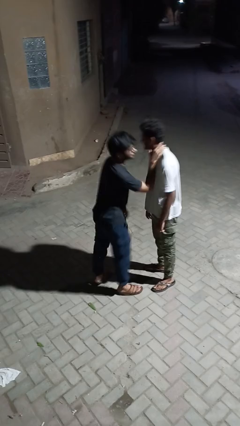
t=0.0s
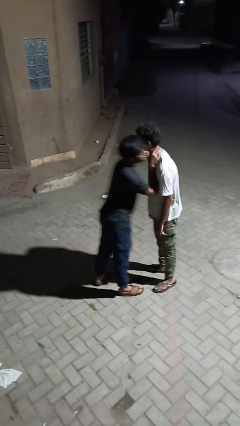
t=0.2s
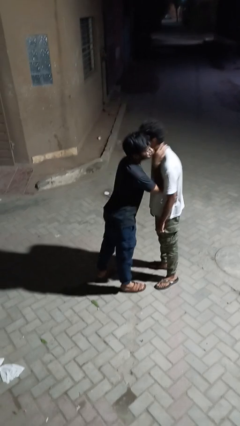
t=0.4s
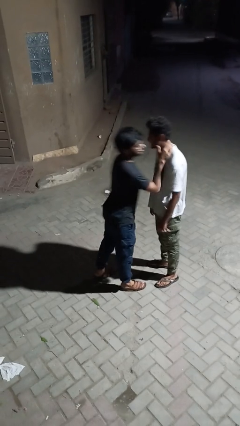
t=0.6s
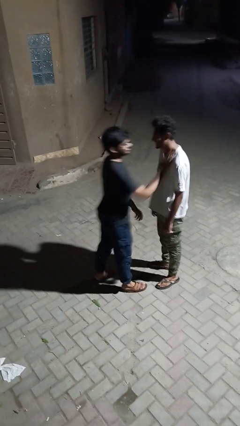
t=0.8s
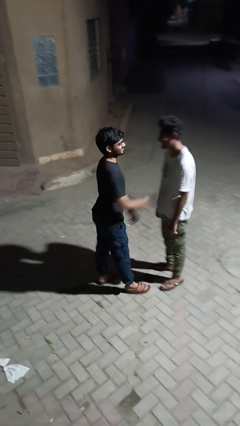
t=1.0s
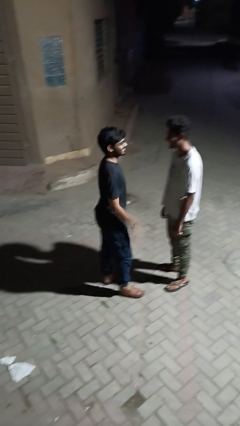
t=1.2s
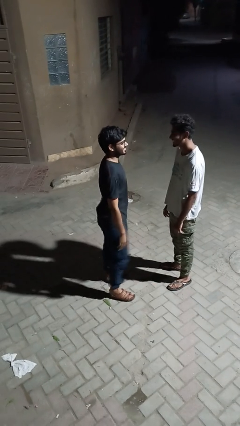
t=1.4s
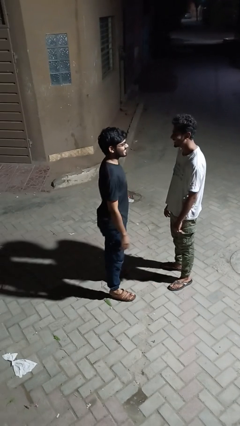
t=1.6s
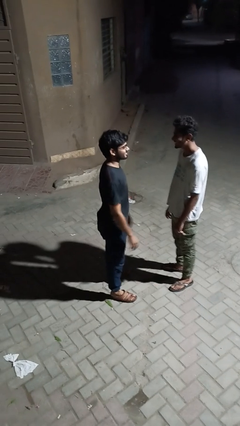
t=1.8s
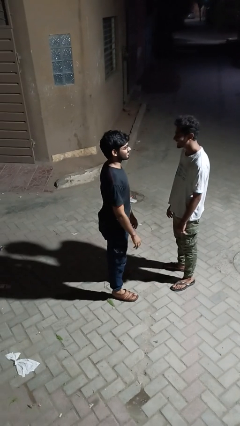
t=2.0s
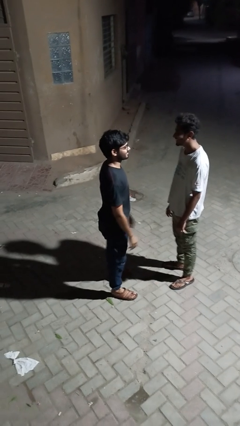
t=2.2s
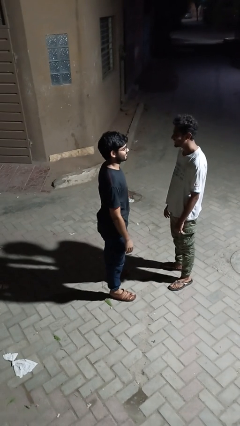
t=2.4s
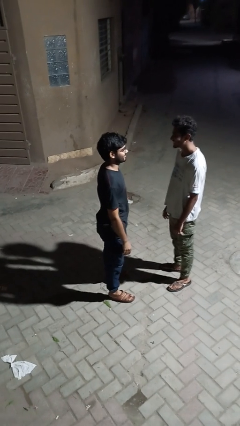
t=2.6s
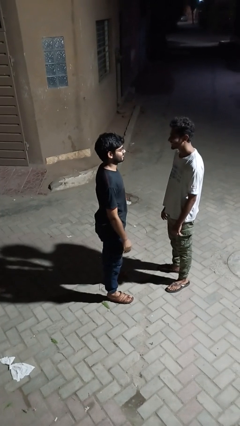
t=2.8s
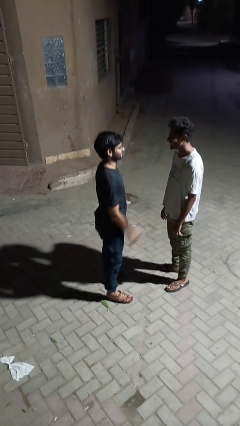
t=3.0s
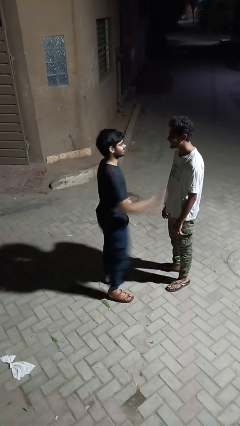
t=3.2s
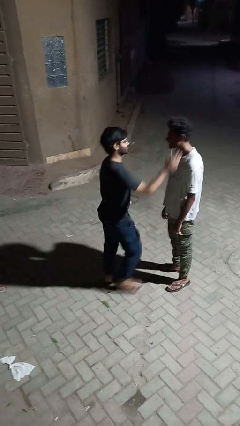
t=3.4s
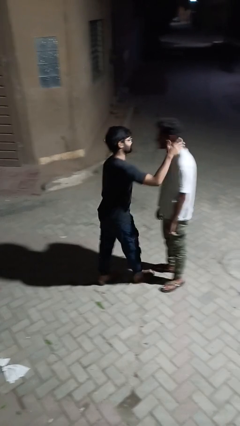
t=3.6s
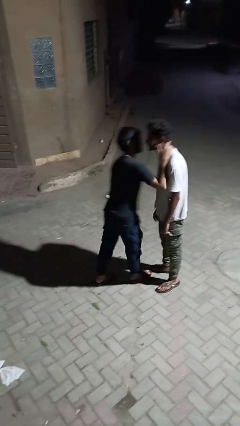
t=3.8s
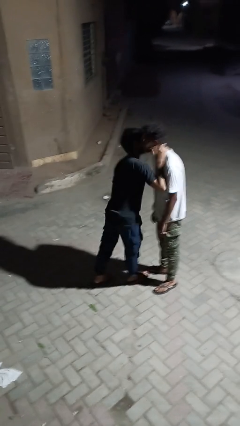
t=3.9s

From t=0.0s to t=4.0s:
person polishes car with rag

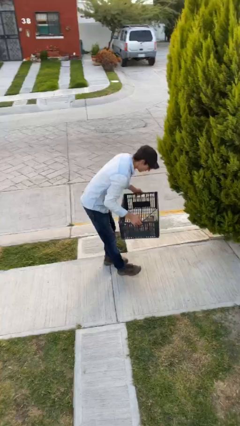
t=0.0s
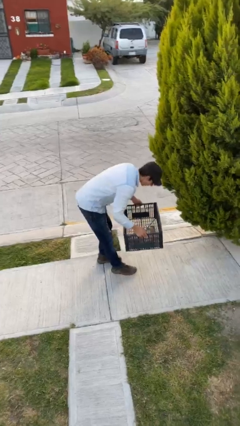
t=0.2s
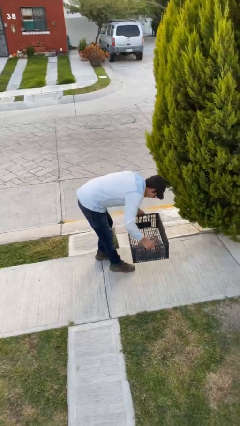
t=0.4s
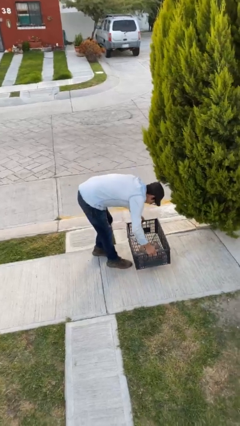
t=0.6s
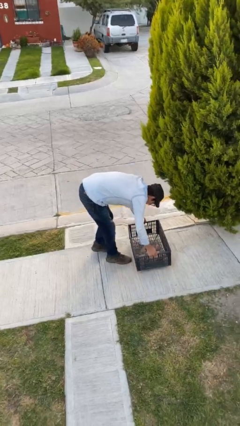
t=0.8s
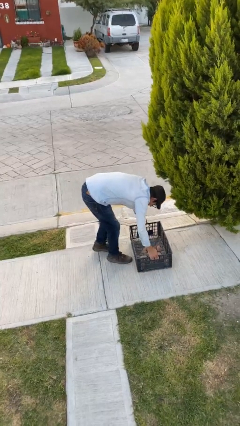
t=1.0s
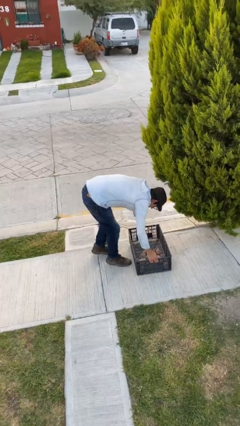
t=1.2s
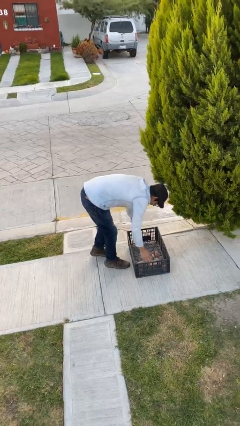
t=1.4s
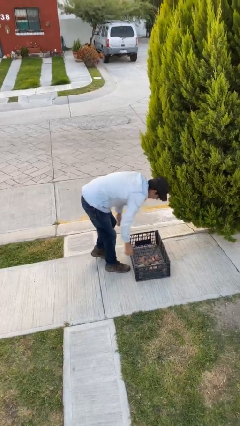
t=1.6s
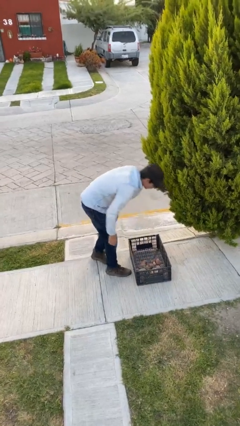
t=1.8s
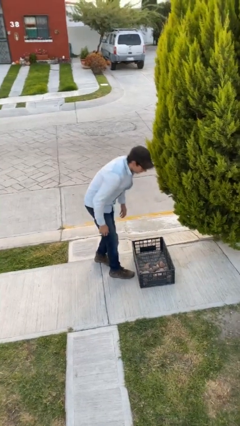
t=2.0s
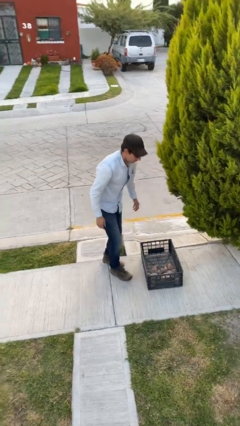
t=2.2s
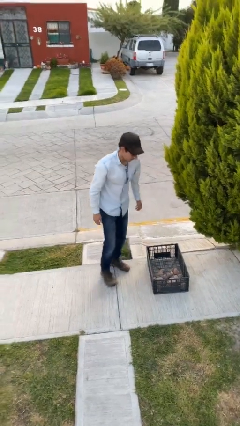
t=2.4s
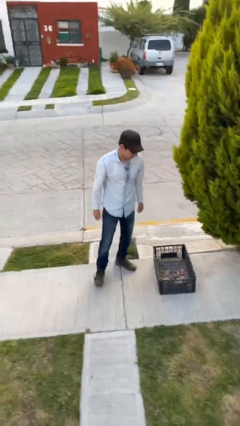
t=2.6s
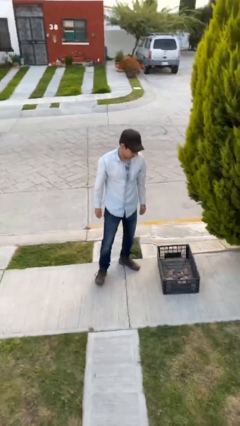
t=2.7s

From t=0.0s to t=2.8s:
person puts down object on floor

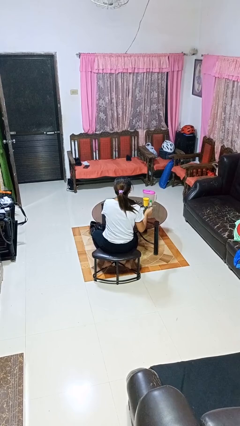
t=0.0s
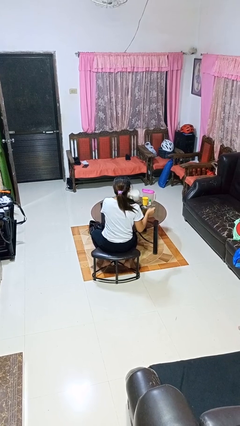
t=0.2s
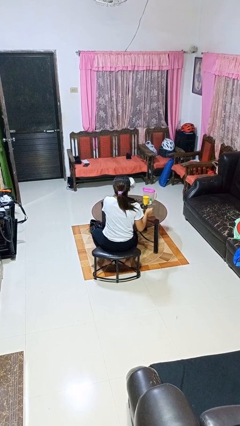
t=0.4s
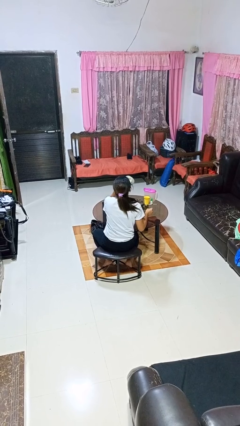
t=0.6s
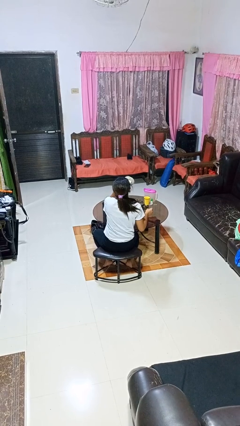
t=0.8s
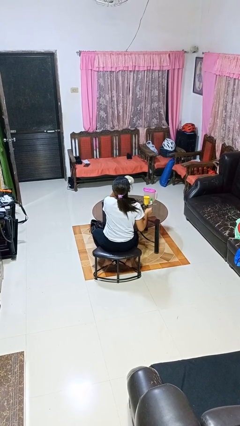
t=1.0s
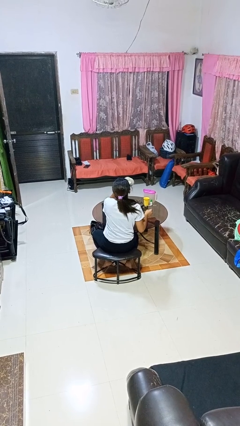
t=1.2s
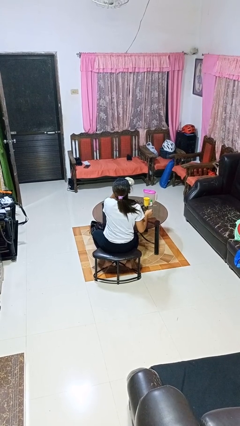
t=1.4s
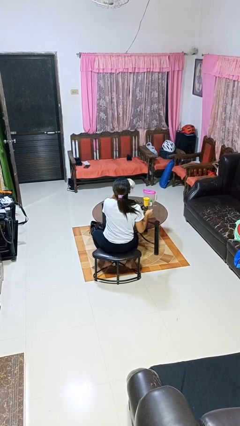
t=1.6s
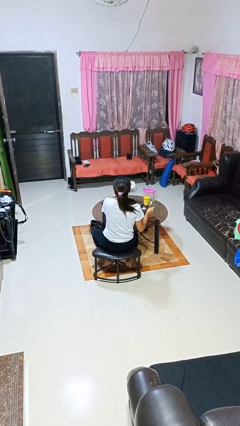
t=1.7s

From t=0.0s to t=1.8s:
person drinks from mug

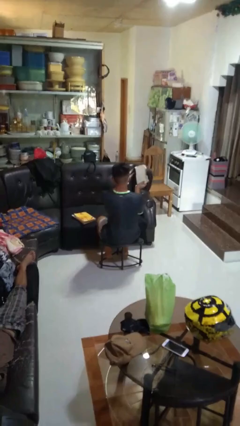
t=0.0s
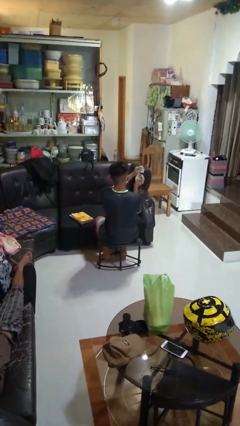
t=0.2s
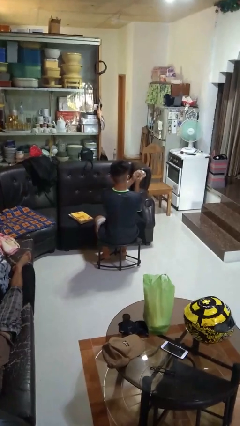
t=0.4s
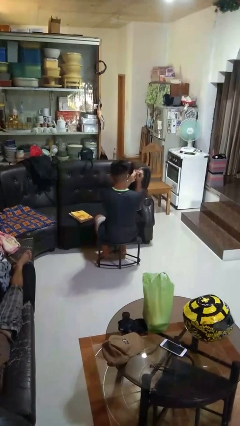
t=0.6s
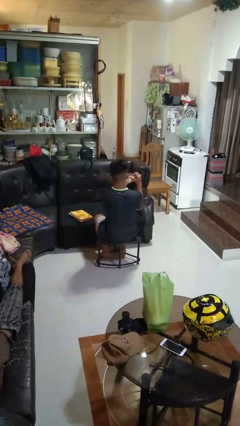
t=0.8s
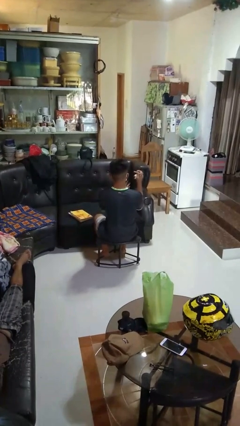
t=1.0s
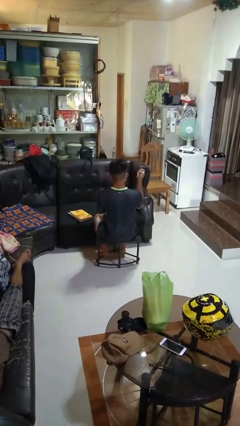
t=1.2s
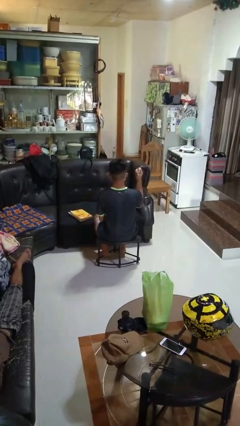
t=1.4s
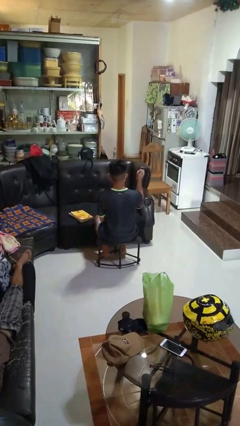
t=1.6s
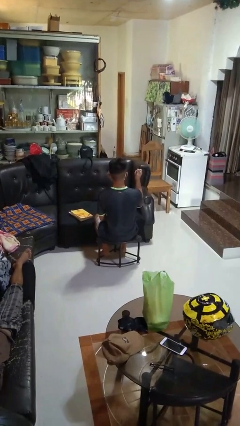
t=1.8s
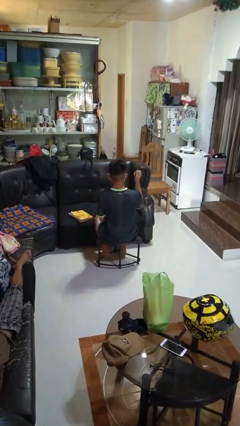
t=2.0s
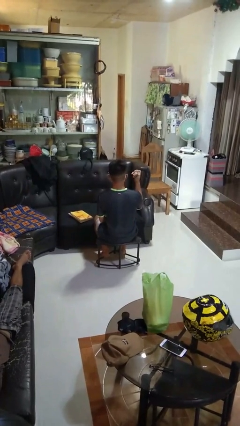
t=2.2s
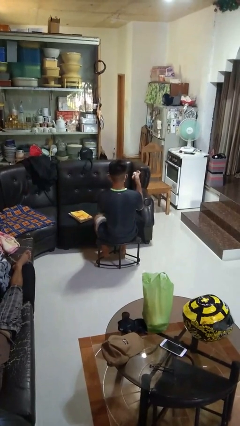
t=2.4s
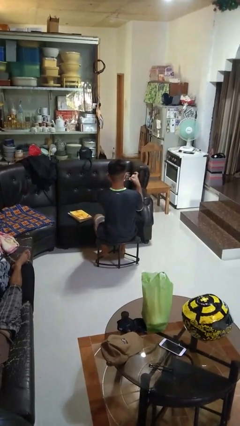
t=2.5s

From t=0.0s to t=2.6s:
person crumples paper

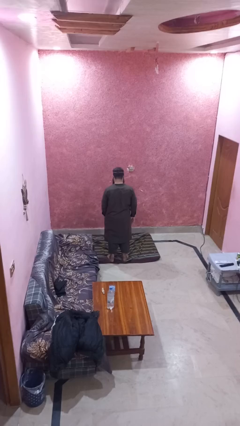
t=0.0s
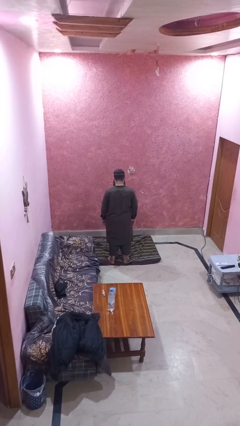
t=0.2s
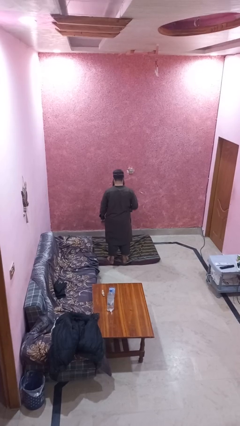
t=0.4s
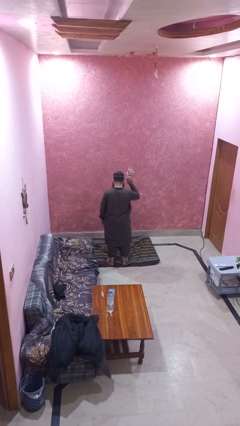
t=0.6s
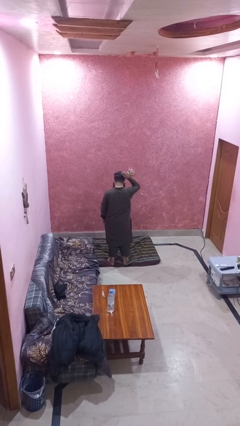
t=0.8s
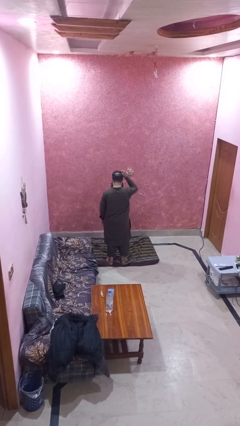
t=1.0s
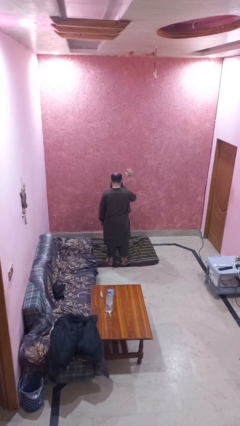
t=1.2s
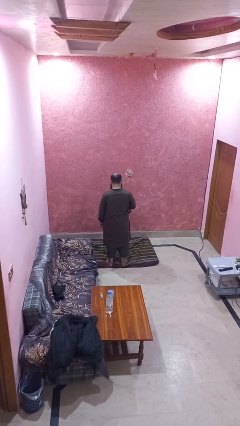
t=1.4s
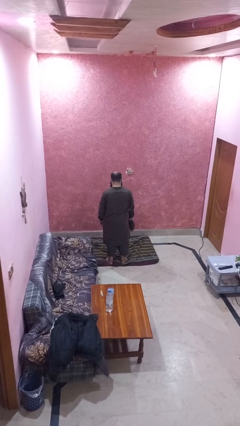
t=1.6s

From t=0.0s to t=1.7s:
person takes off hat

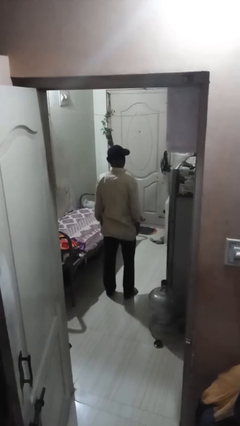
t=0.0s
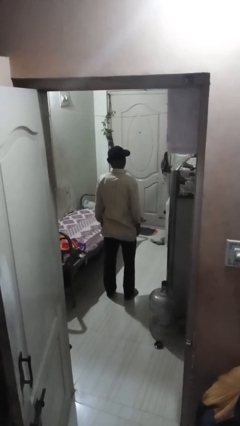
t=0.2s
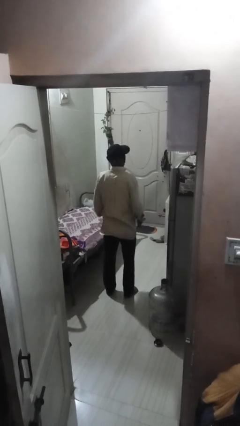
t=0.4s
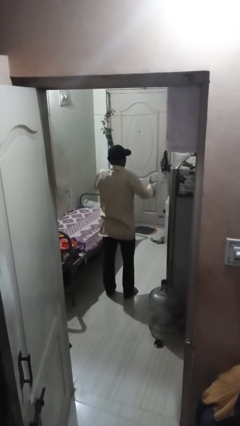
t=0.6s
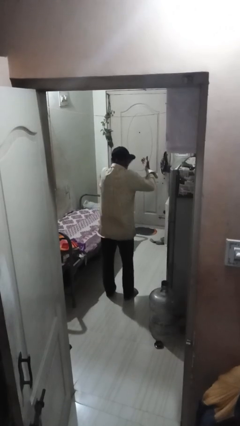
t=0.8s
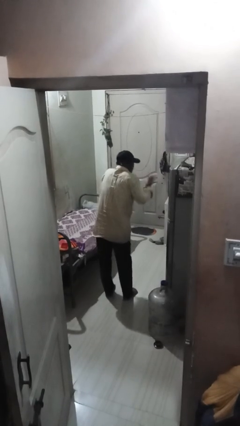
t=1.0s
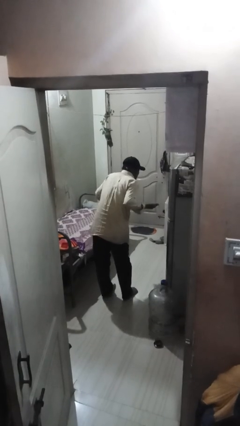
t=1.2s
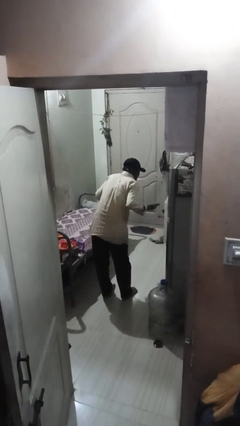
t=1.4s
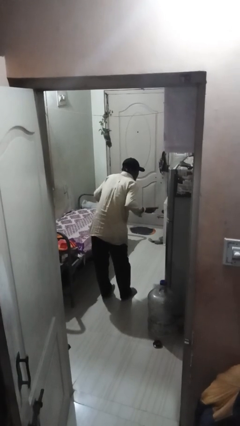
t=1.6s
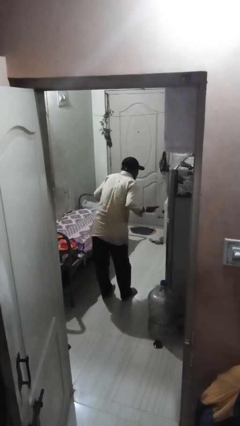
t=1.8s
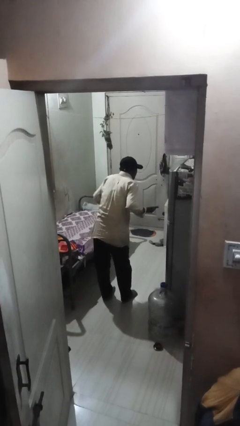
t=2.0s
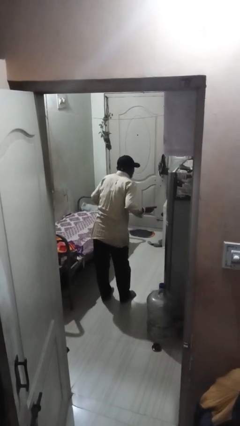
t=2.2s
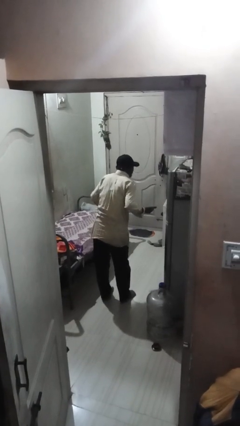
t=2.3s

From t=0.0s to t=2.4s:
person shrugs

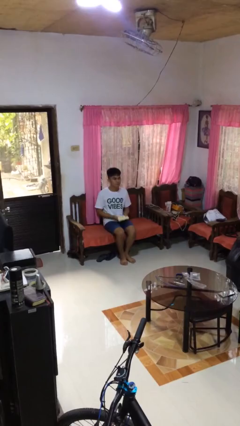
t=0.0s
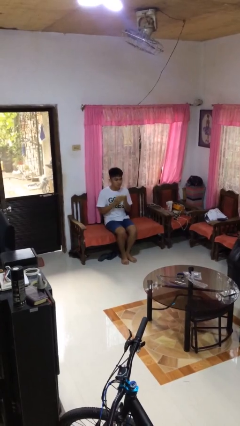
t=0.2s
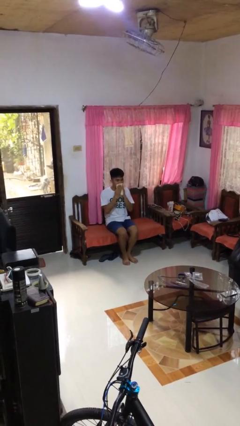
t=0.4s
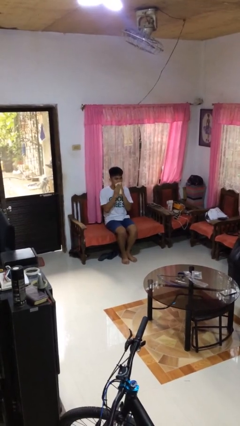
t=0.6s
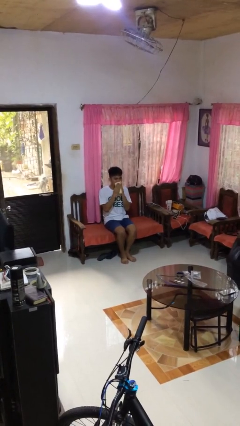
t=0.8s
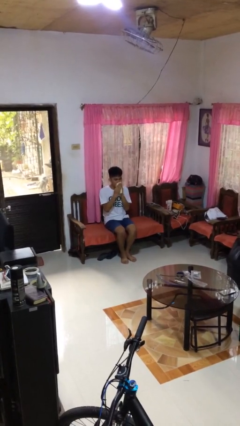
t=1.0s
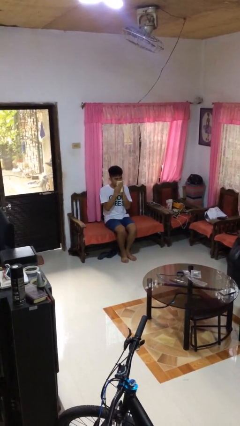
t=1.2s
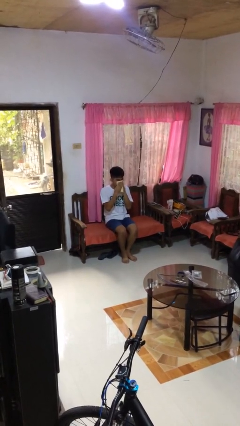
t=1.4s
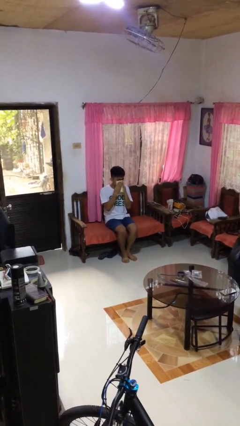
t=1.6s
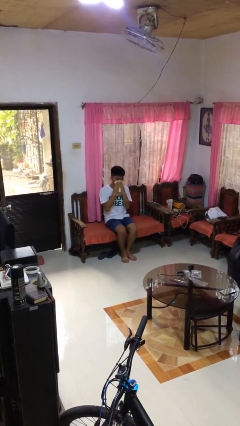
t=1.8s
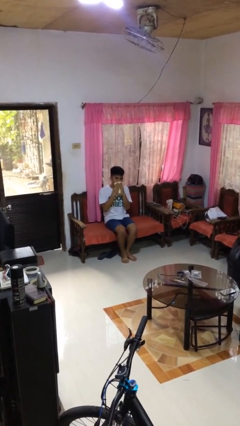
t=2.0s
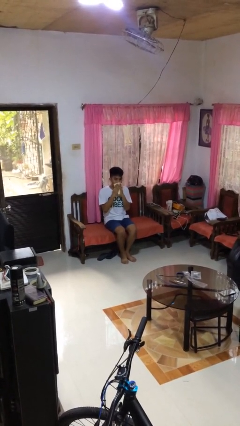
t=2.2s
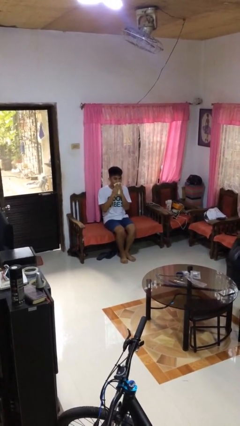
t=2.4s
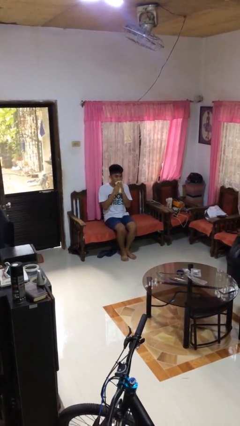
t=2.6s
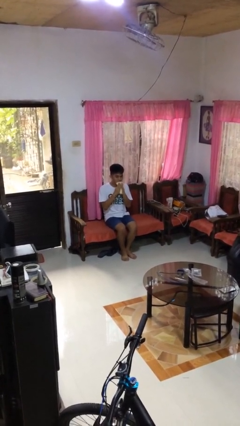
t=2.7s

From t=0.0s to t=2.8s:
person wipes mouth with napkin
